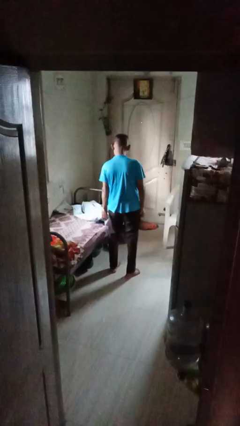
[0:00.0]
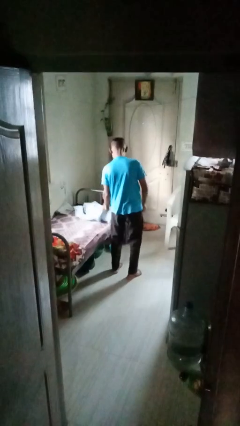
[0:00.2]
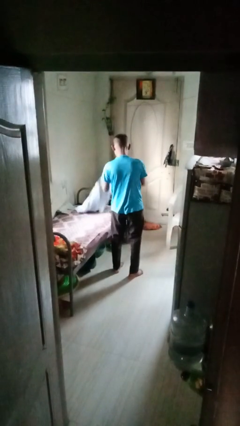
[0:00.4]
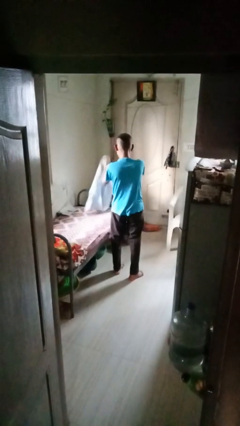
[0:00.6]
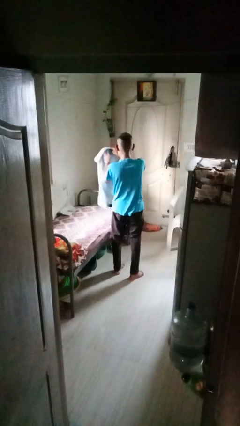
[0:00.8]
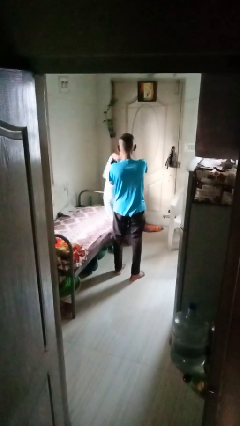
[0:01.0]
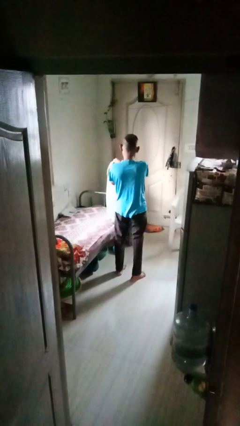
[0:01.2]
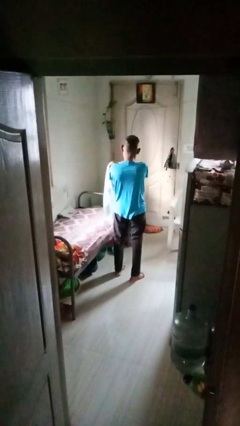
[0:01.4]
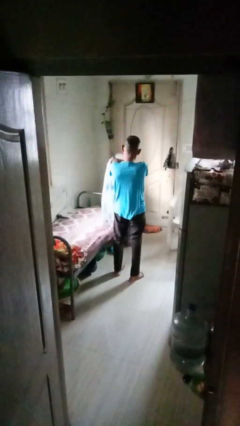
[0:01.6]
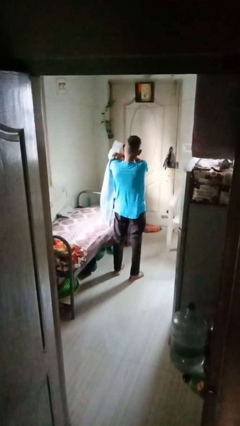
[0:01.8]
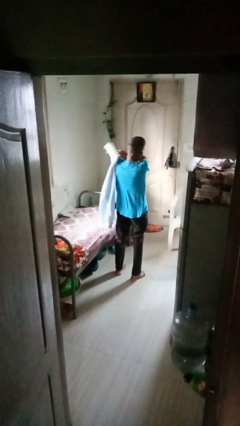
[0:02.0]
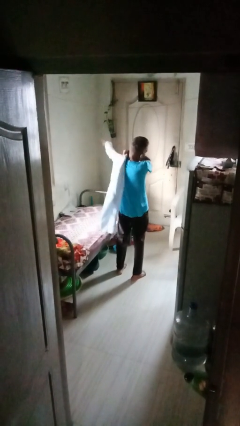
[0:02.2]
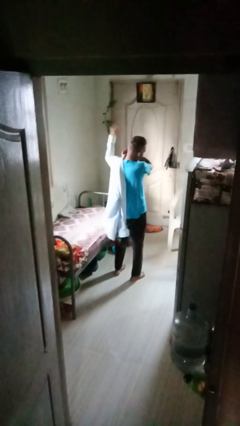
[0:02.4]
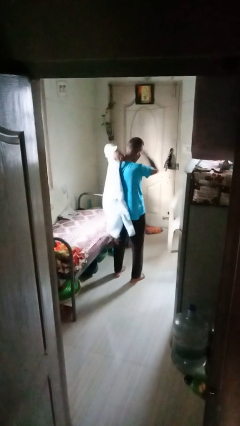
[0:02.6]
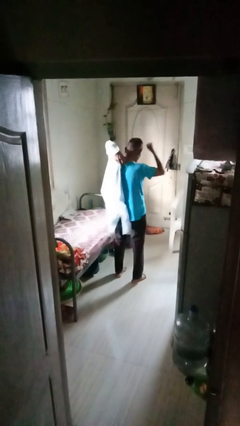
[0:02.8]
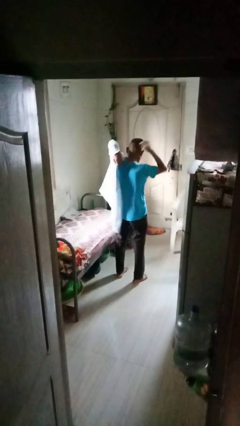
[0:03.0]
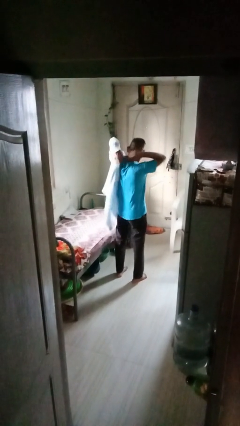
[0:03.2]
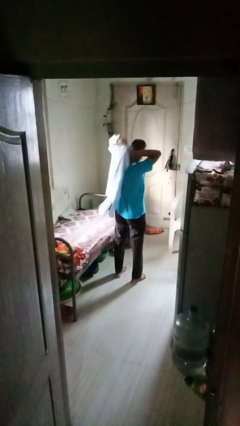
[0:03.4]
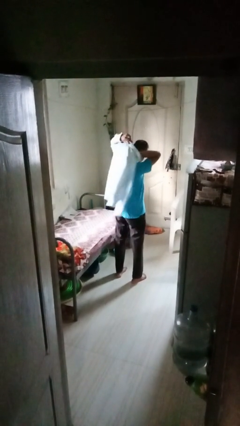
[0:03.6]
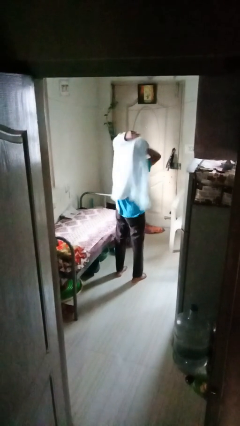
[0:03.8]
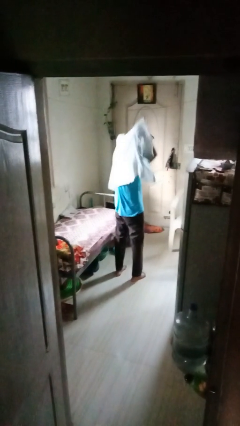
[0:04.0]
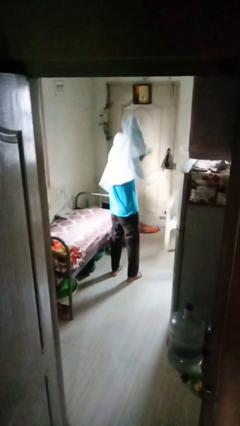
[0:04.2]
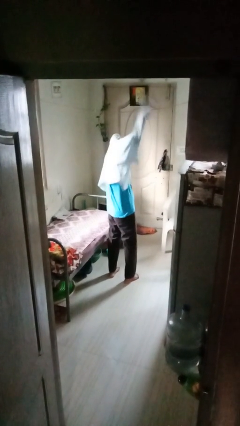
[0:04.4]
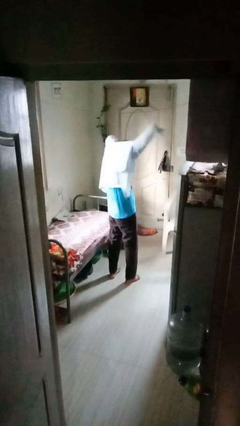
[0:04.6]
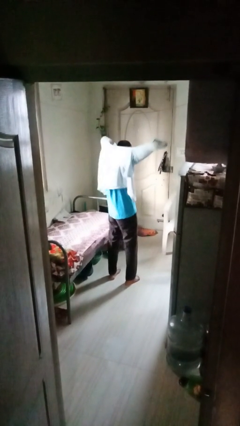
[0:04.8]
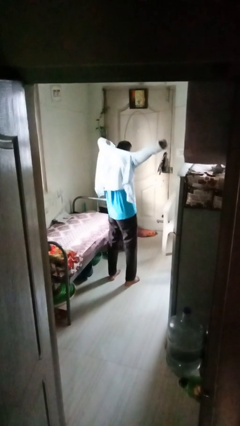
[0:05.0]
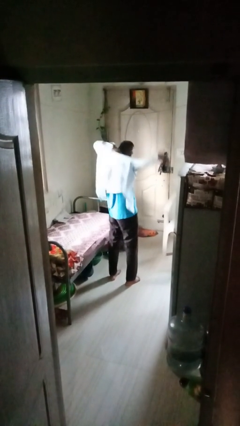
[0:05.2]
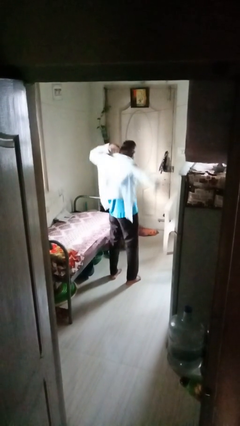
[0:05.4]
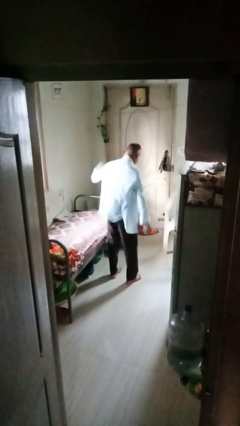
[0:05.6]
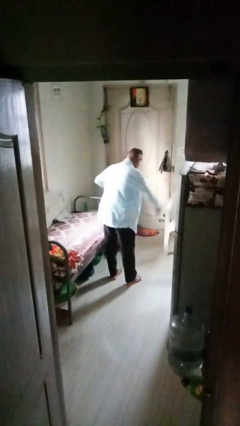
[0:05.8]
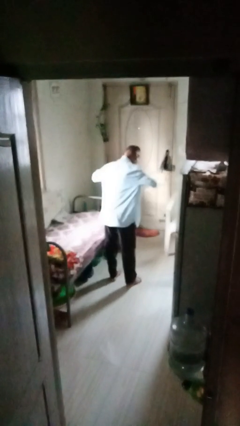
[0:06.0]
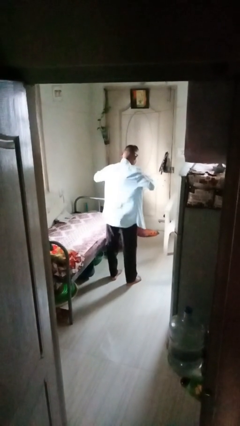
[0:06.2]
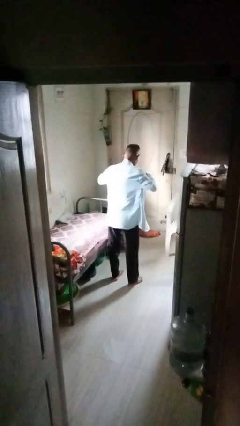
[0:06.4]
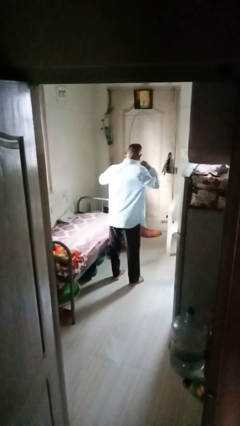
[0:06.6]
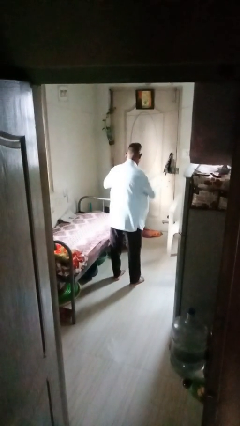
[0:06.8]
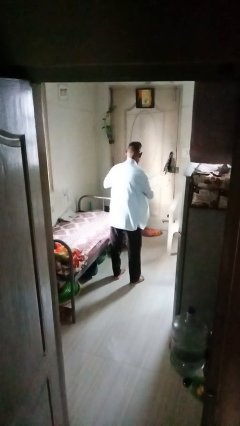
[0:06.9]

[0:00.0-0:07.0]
person puts on shirt

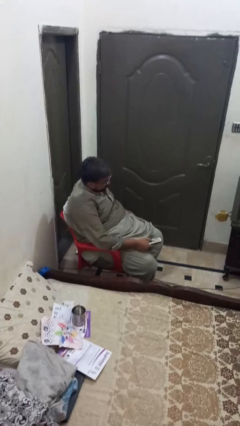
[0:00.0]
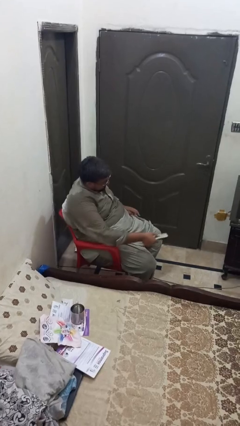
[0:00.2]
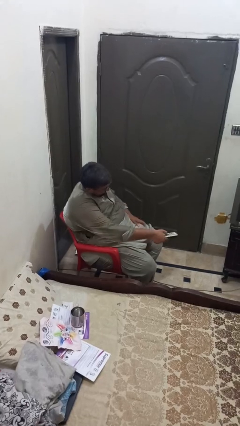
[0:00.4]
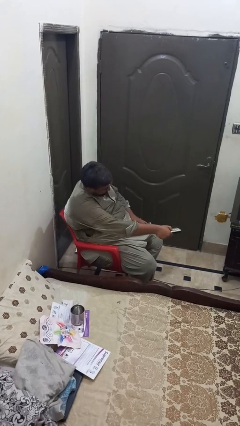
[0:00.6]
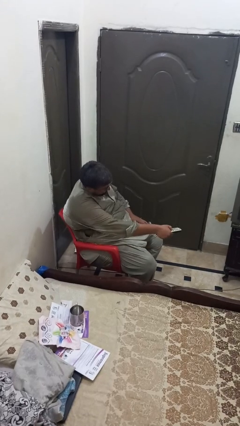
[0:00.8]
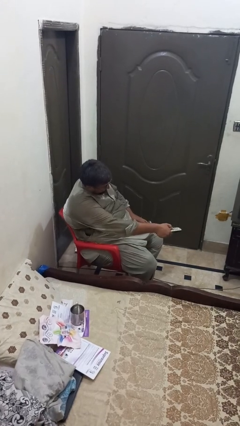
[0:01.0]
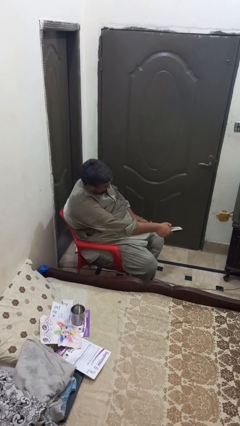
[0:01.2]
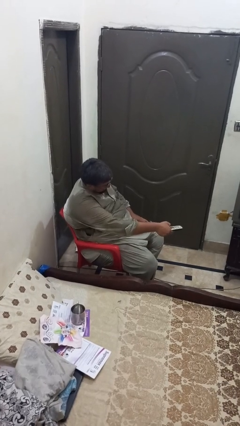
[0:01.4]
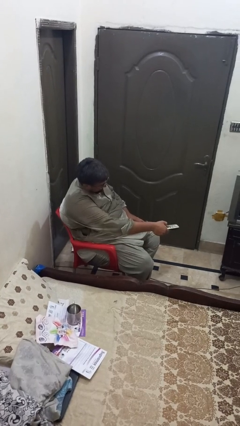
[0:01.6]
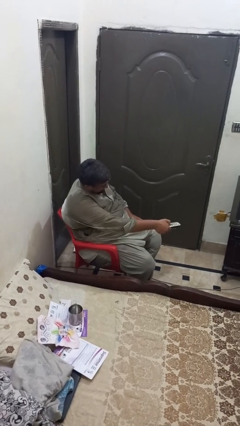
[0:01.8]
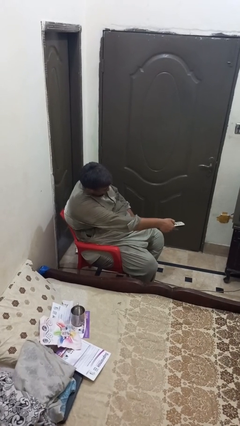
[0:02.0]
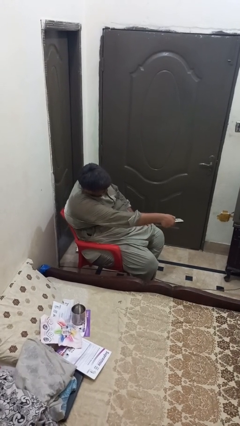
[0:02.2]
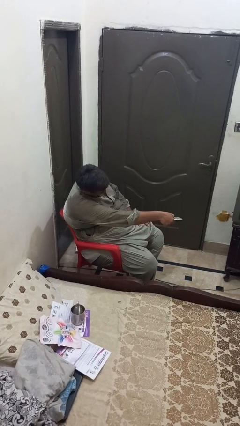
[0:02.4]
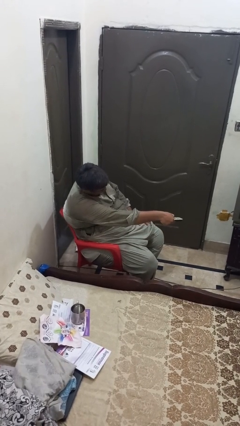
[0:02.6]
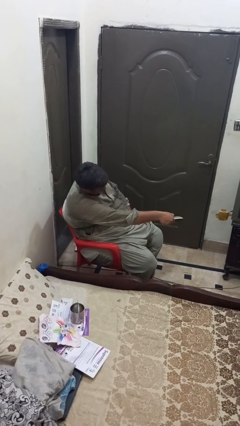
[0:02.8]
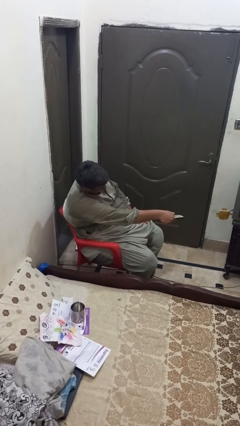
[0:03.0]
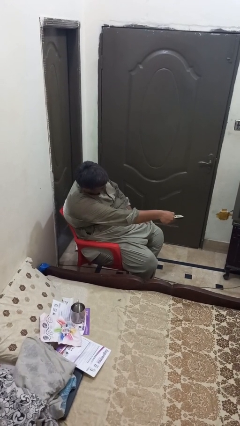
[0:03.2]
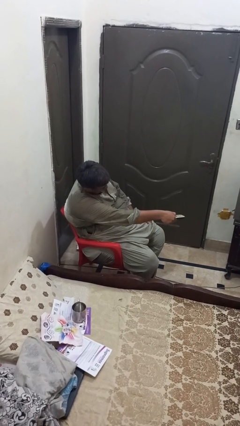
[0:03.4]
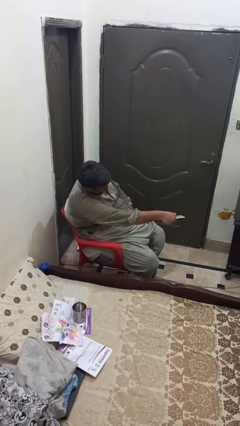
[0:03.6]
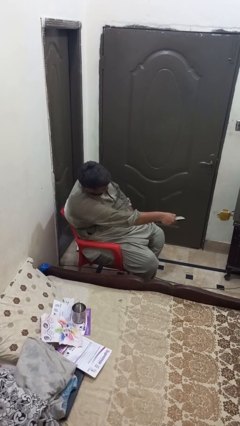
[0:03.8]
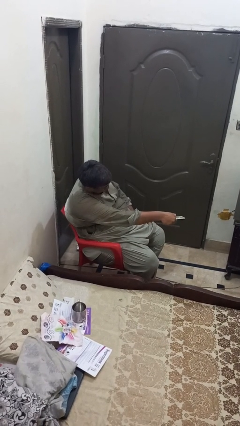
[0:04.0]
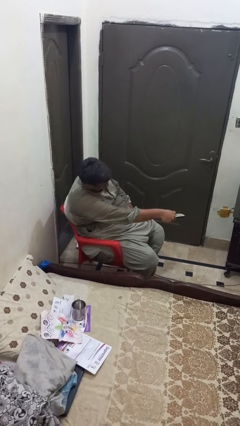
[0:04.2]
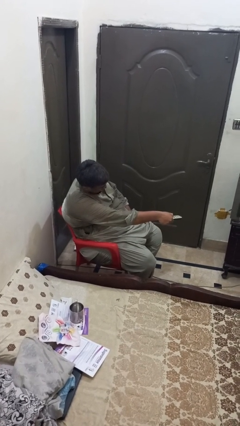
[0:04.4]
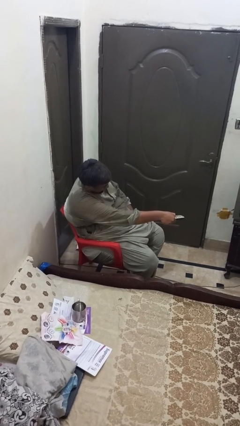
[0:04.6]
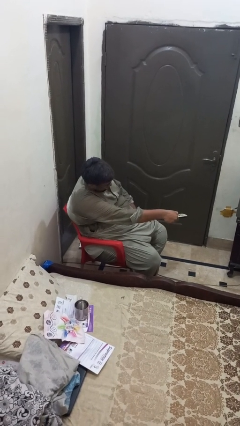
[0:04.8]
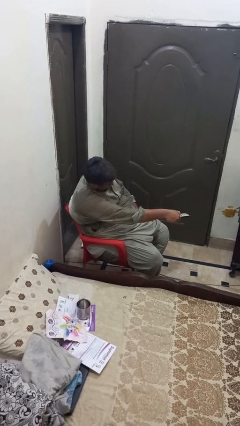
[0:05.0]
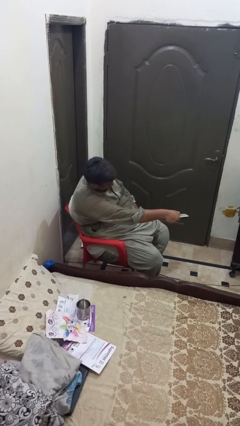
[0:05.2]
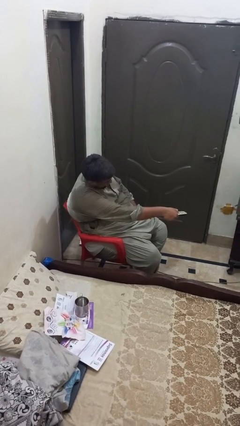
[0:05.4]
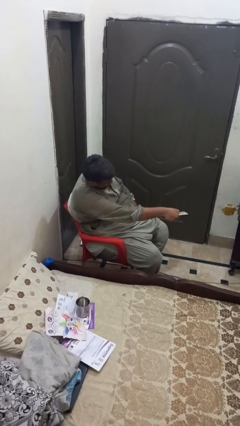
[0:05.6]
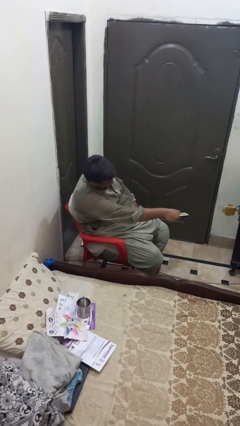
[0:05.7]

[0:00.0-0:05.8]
person uses television remote

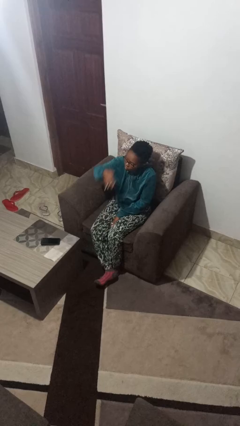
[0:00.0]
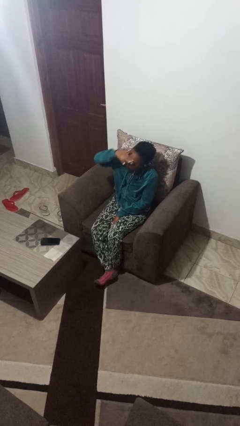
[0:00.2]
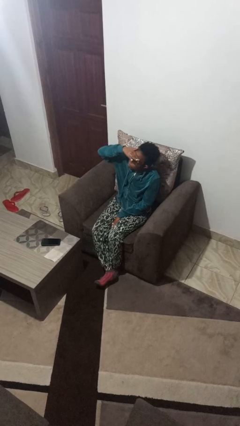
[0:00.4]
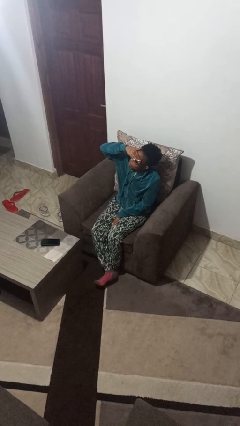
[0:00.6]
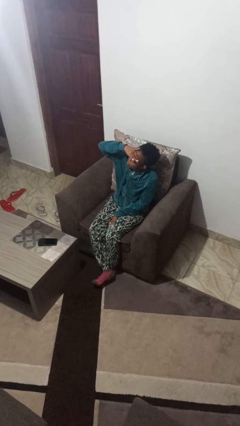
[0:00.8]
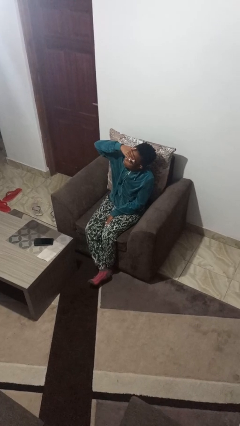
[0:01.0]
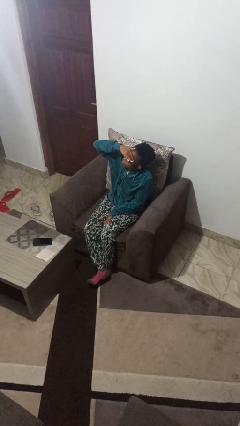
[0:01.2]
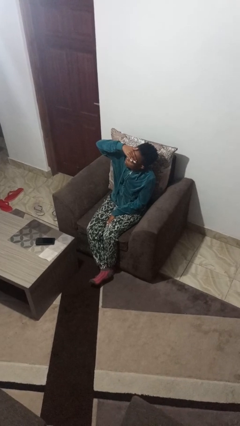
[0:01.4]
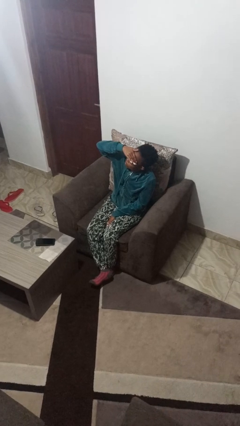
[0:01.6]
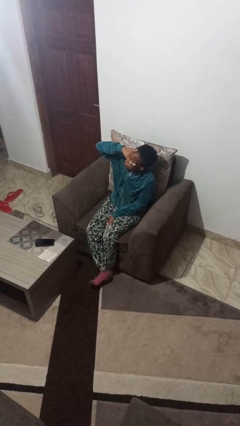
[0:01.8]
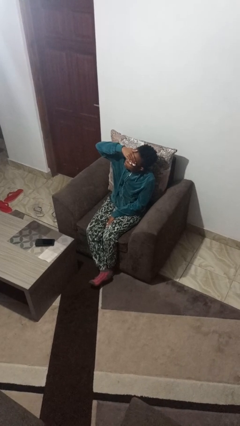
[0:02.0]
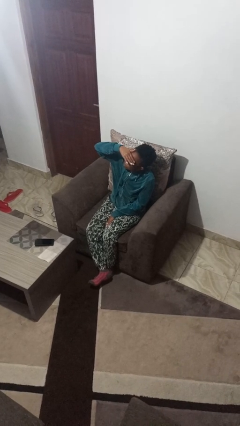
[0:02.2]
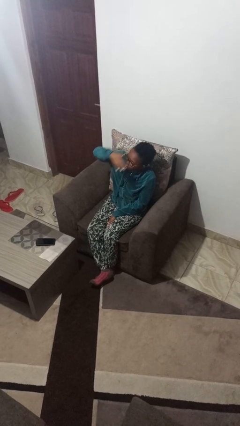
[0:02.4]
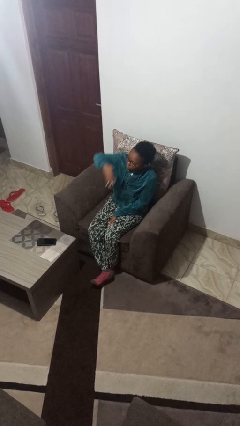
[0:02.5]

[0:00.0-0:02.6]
person shades eyes

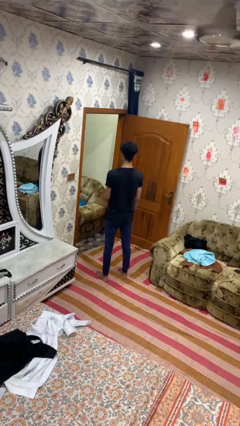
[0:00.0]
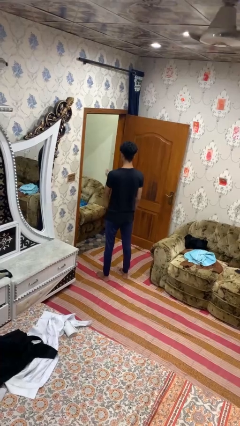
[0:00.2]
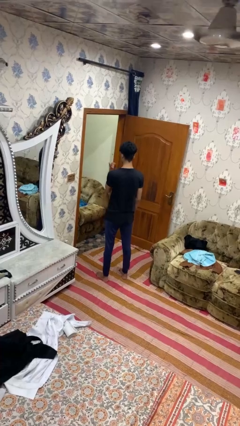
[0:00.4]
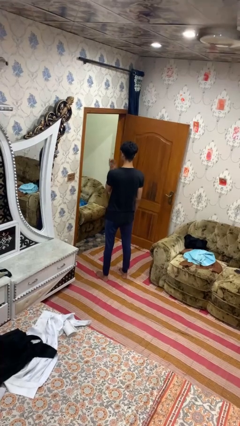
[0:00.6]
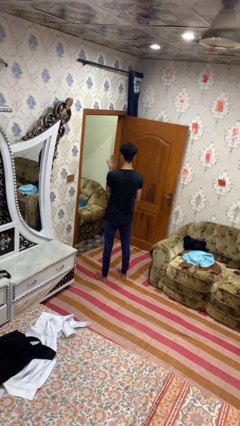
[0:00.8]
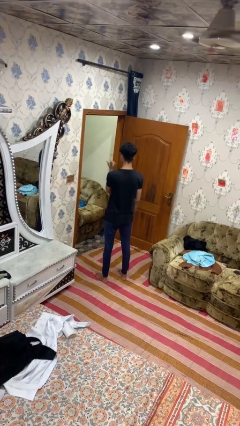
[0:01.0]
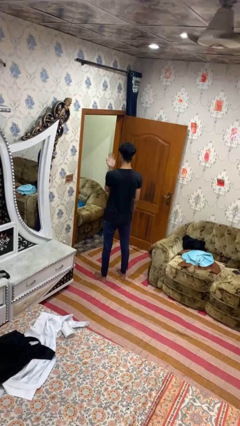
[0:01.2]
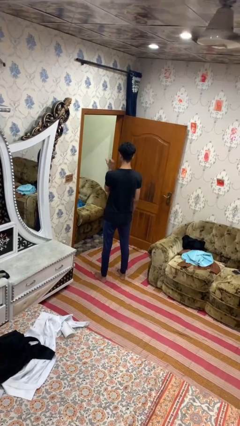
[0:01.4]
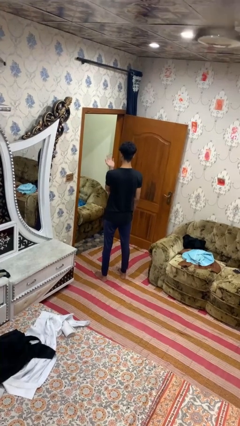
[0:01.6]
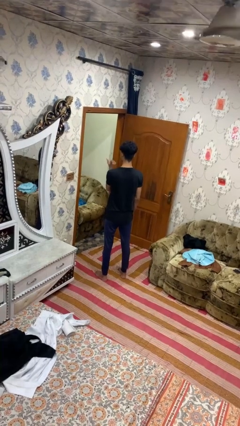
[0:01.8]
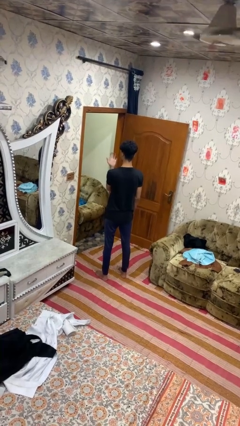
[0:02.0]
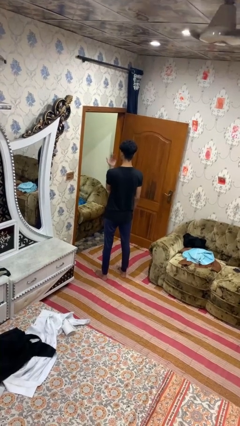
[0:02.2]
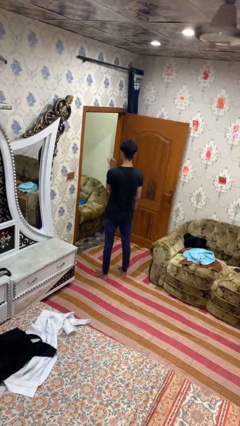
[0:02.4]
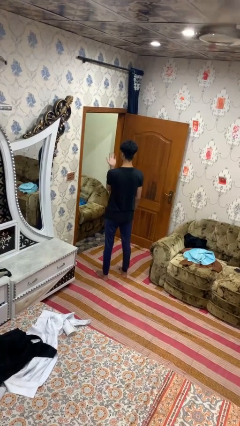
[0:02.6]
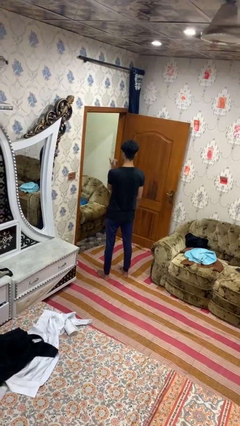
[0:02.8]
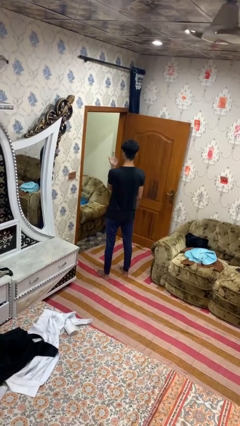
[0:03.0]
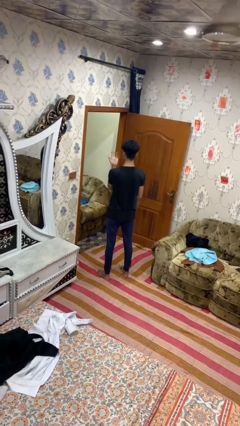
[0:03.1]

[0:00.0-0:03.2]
person gestures listen closely
